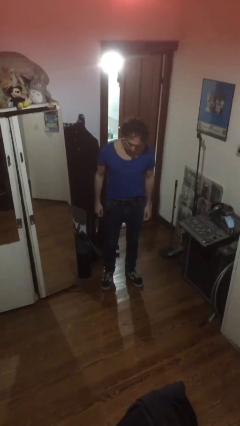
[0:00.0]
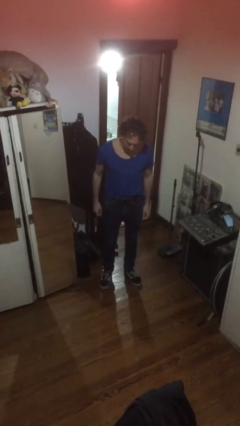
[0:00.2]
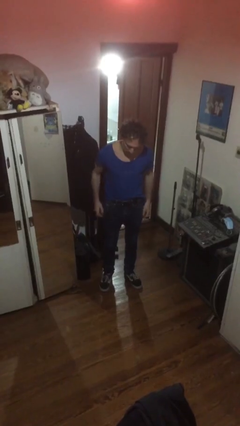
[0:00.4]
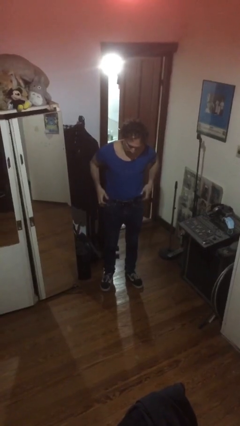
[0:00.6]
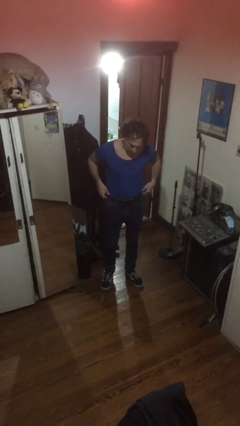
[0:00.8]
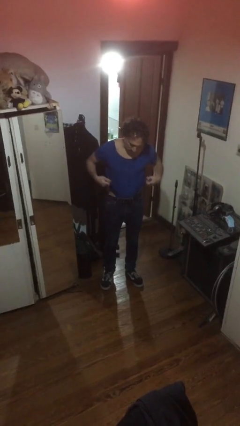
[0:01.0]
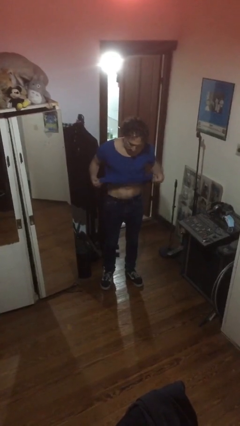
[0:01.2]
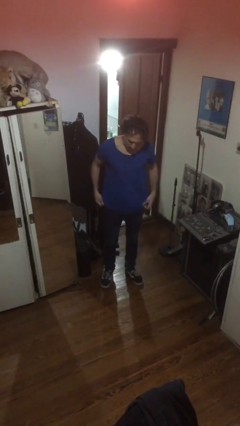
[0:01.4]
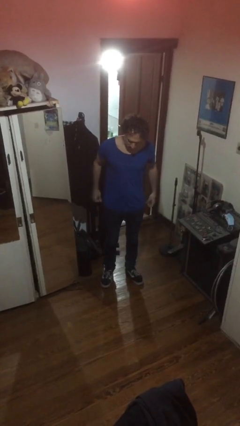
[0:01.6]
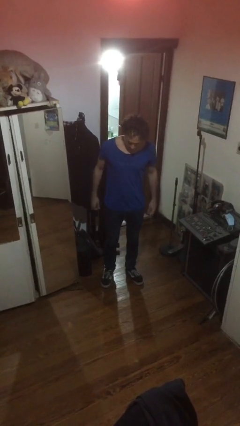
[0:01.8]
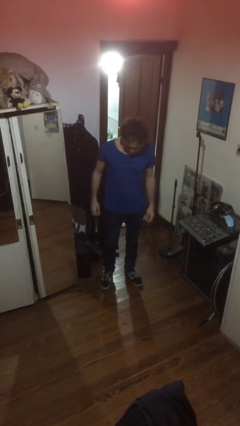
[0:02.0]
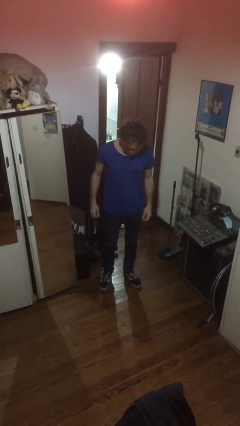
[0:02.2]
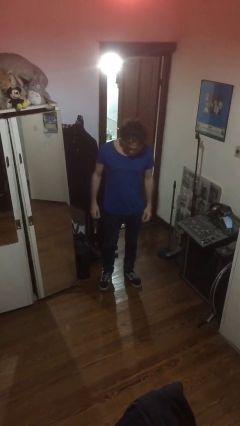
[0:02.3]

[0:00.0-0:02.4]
person untucks shirt

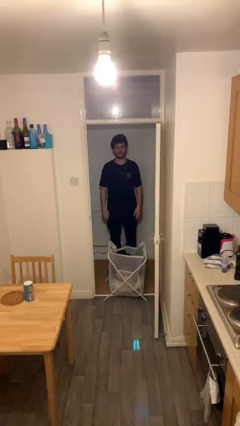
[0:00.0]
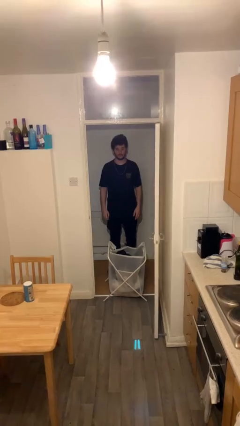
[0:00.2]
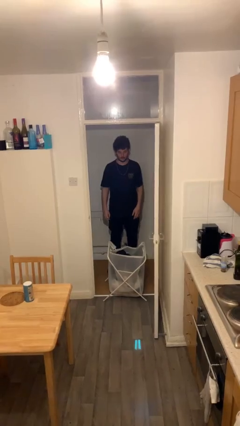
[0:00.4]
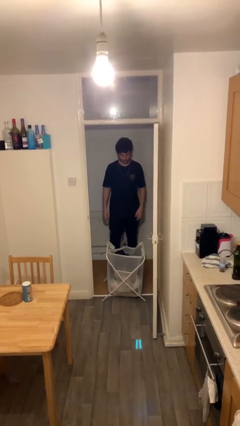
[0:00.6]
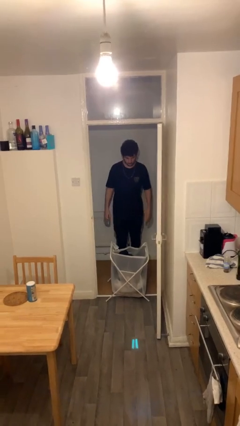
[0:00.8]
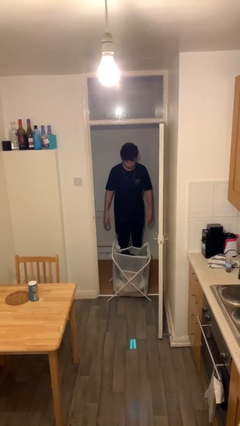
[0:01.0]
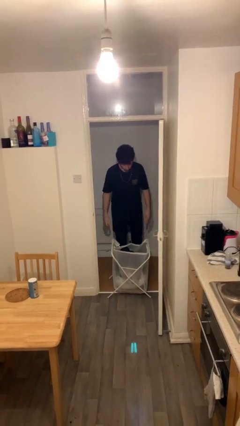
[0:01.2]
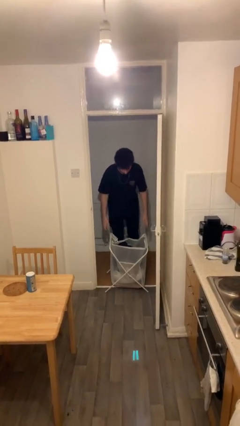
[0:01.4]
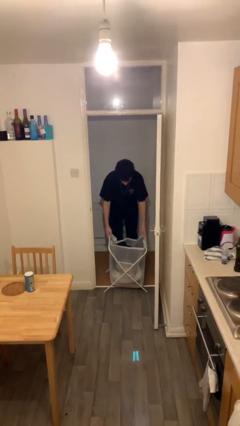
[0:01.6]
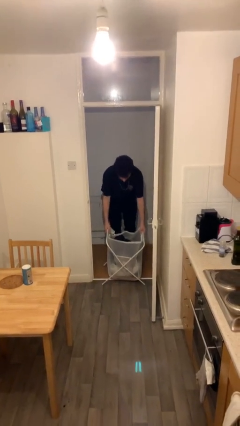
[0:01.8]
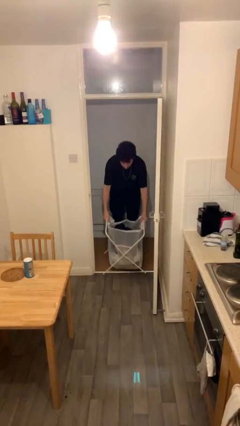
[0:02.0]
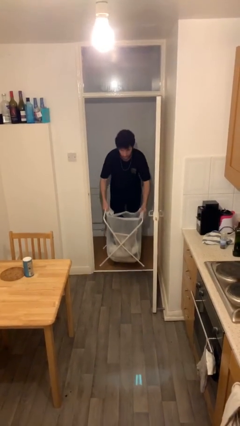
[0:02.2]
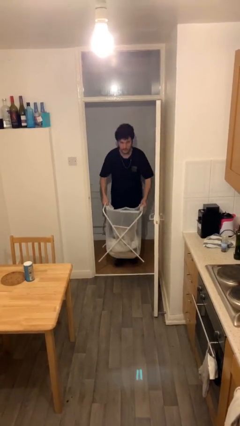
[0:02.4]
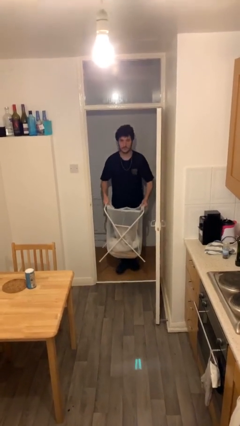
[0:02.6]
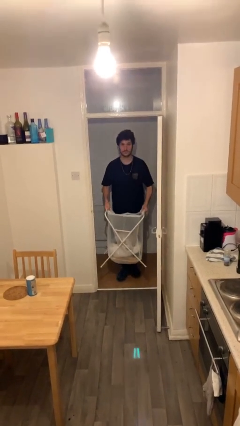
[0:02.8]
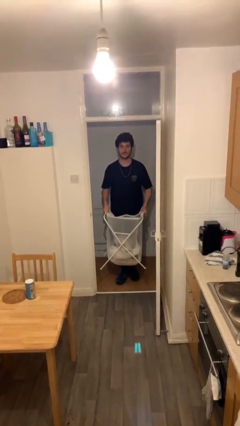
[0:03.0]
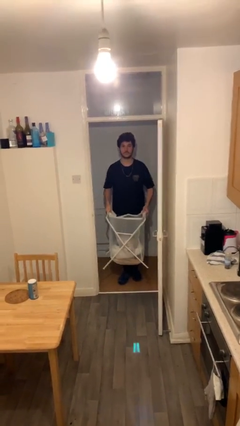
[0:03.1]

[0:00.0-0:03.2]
person picks up object from floor

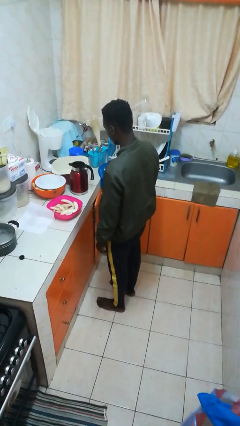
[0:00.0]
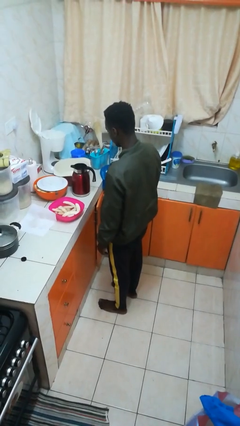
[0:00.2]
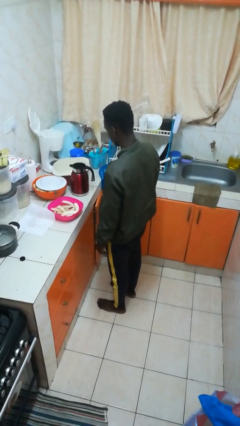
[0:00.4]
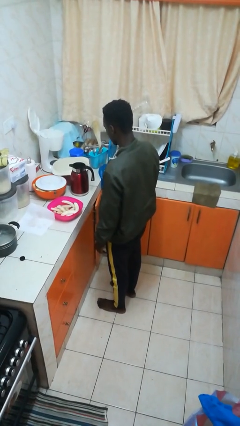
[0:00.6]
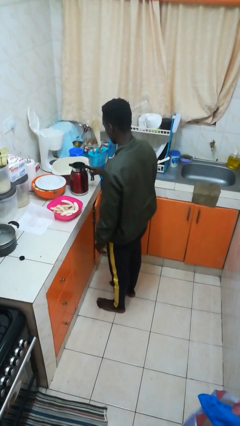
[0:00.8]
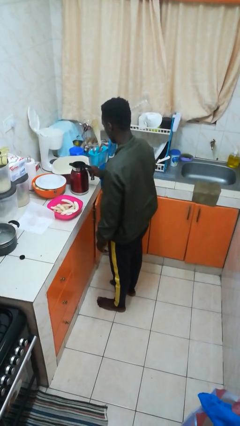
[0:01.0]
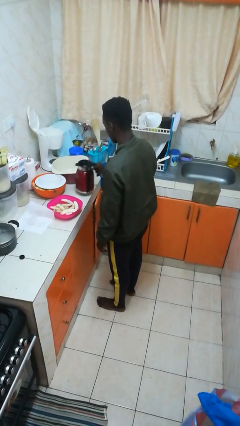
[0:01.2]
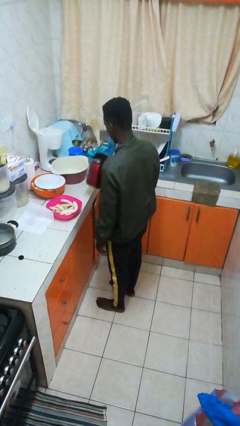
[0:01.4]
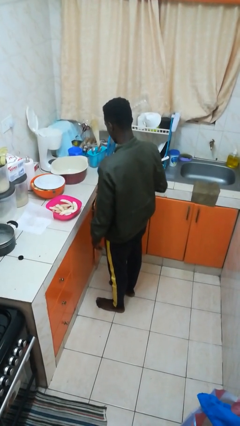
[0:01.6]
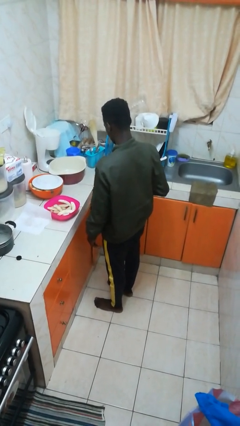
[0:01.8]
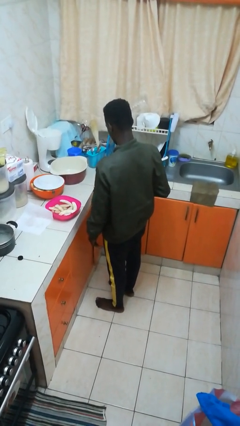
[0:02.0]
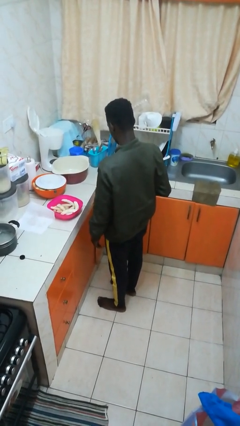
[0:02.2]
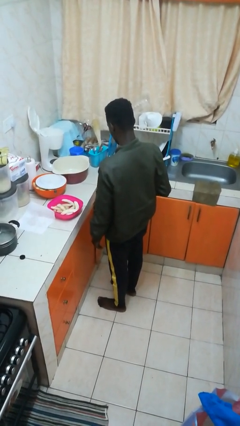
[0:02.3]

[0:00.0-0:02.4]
person picks up object from countertop

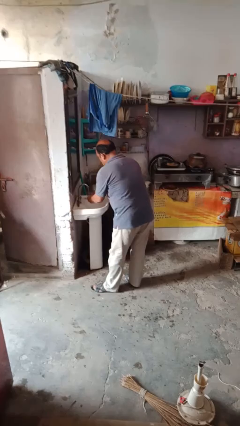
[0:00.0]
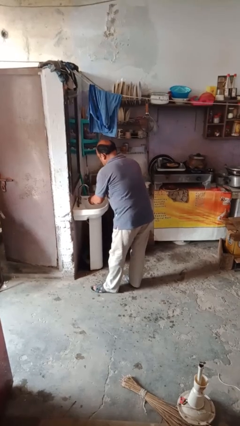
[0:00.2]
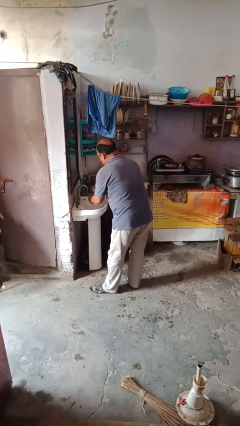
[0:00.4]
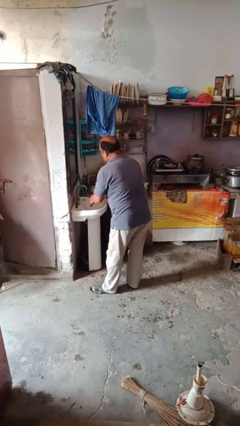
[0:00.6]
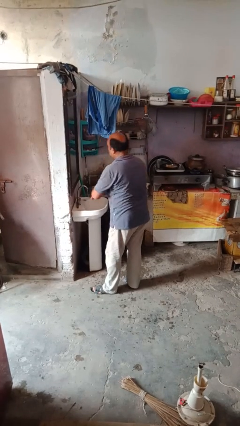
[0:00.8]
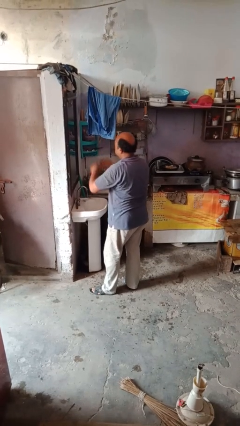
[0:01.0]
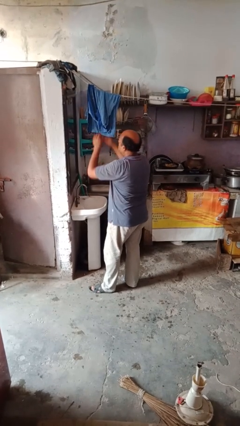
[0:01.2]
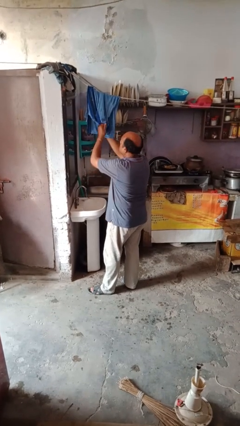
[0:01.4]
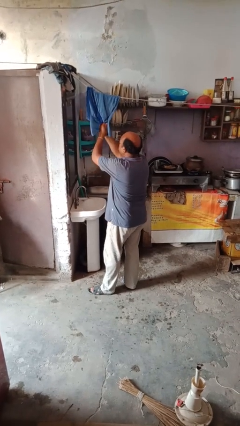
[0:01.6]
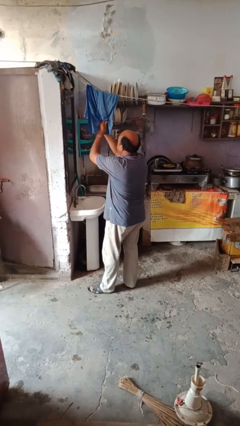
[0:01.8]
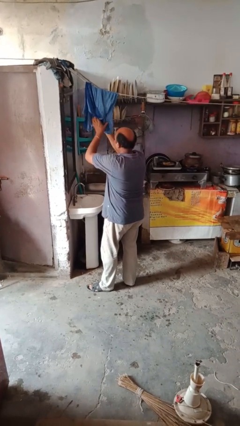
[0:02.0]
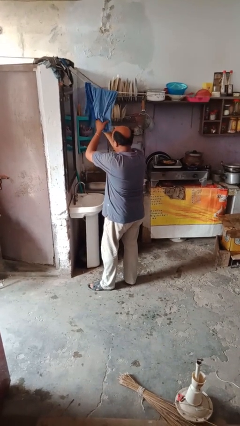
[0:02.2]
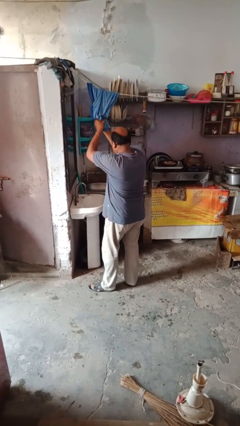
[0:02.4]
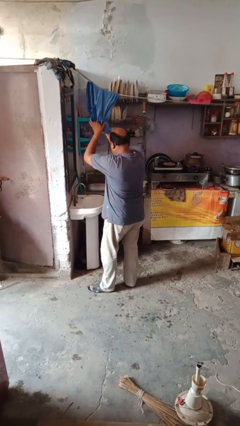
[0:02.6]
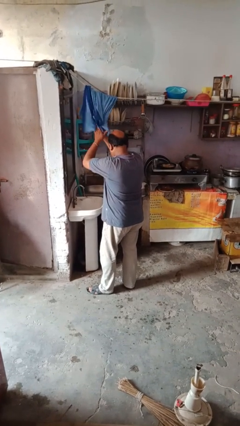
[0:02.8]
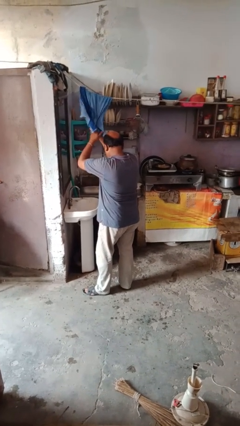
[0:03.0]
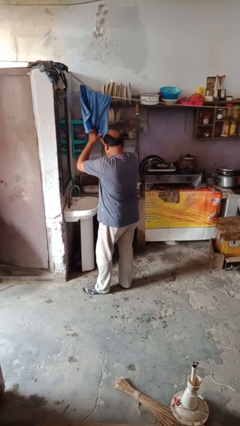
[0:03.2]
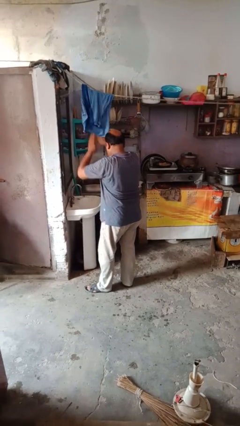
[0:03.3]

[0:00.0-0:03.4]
person dries hands with towel

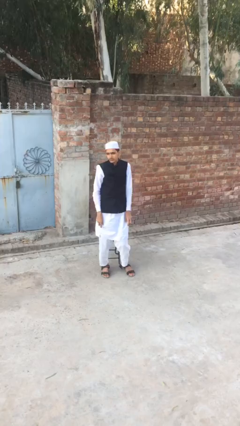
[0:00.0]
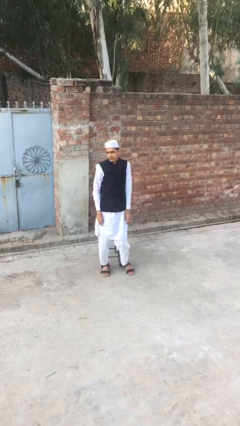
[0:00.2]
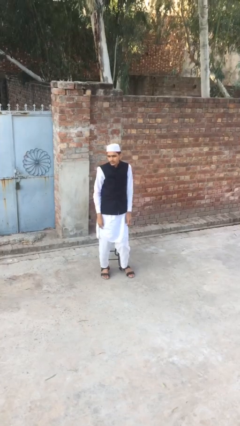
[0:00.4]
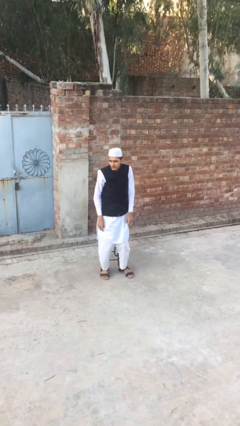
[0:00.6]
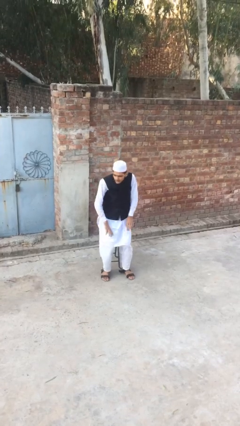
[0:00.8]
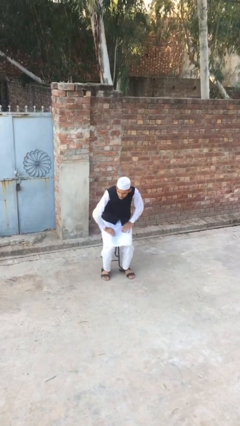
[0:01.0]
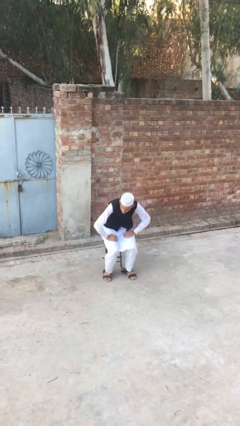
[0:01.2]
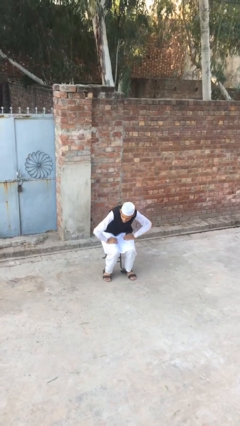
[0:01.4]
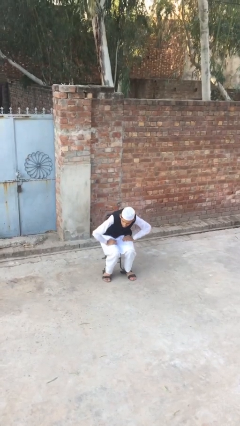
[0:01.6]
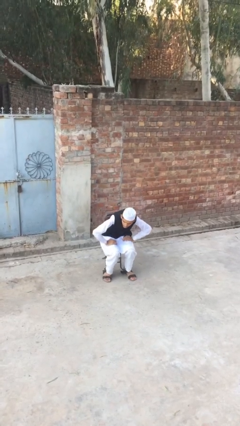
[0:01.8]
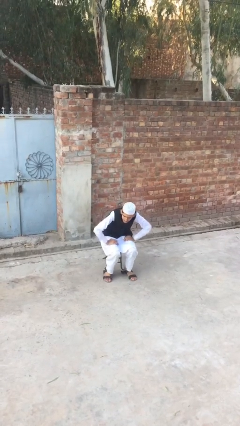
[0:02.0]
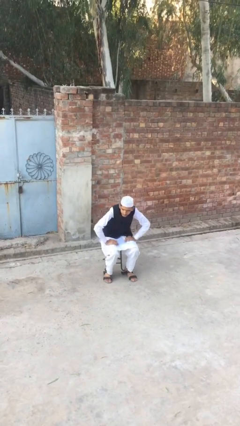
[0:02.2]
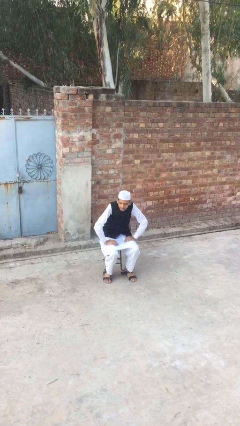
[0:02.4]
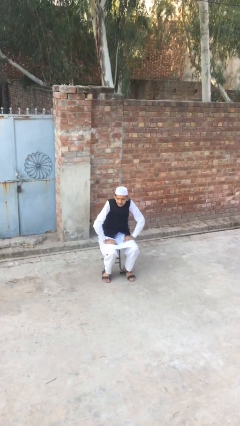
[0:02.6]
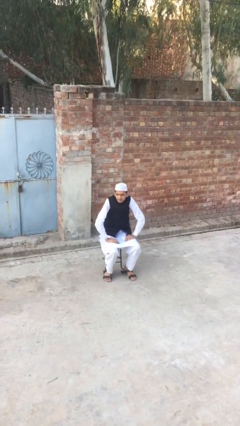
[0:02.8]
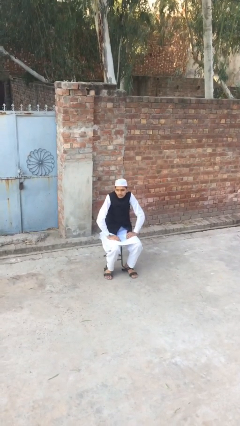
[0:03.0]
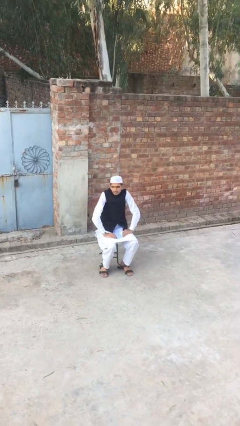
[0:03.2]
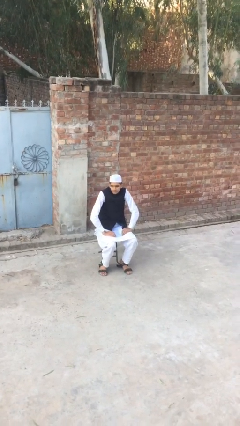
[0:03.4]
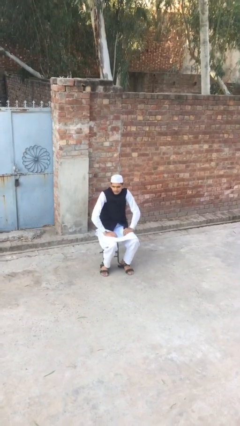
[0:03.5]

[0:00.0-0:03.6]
person sits down

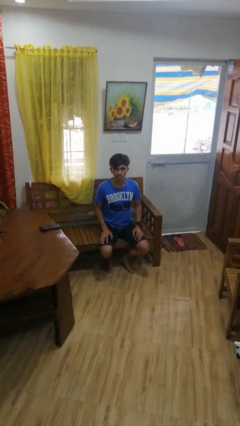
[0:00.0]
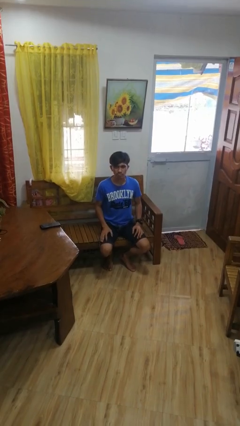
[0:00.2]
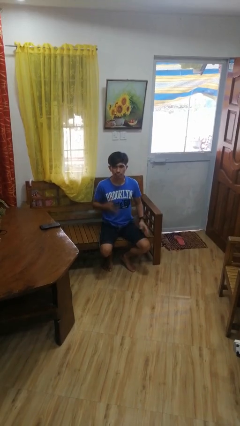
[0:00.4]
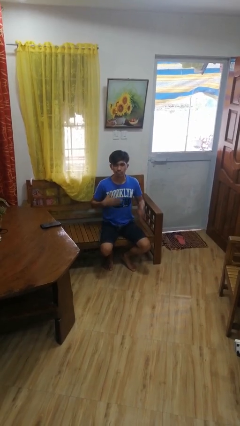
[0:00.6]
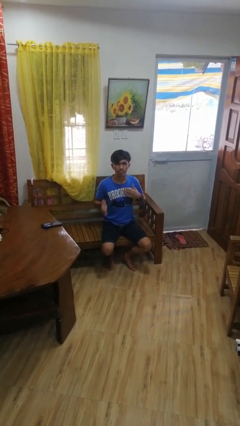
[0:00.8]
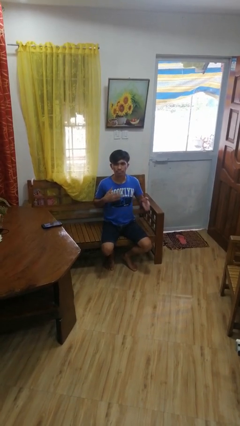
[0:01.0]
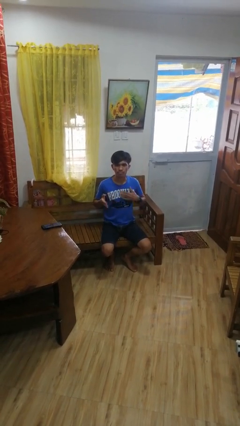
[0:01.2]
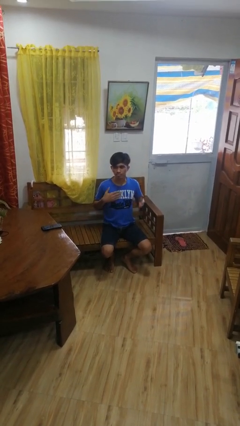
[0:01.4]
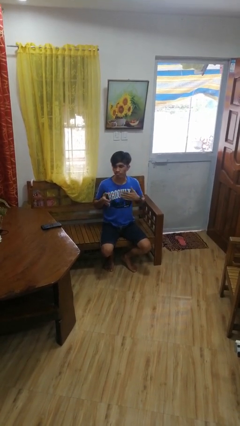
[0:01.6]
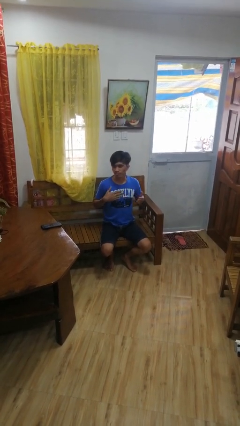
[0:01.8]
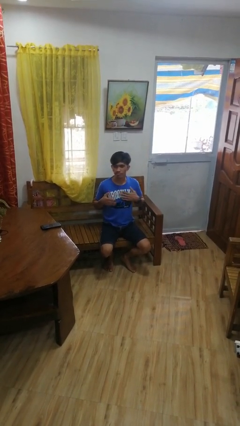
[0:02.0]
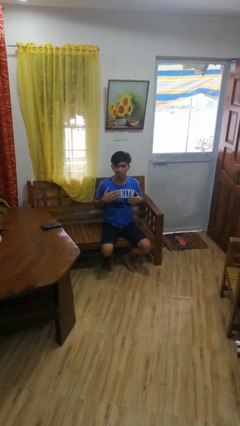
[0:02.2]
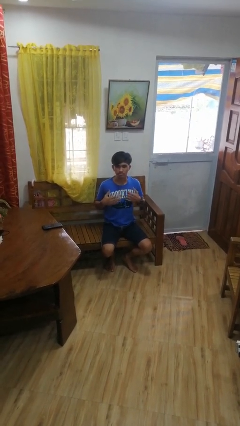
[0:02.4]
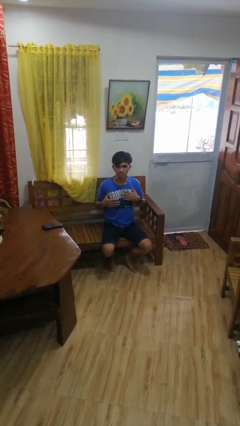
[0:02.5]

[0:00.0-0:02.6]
person drums on chest
